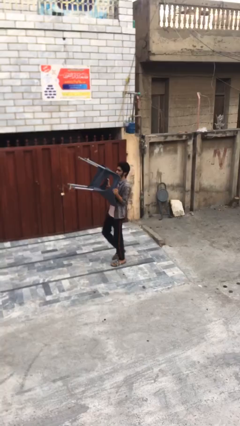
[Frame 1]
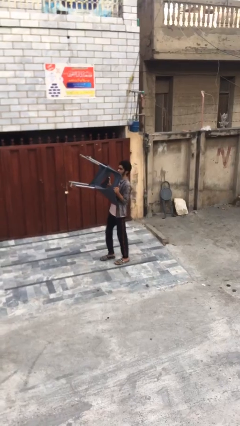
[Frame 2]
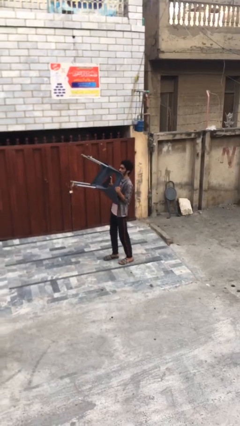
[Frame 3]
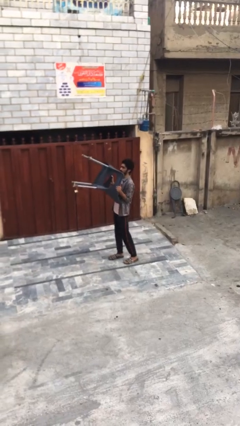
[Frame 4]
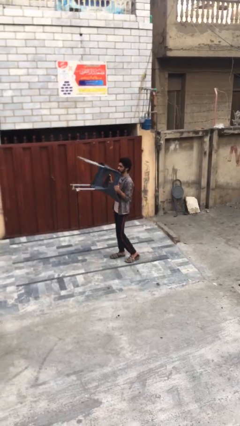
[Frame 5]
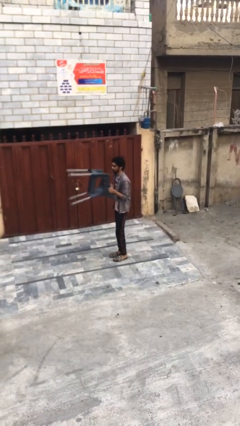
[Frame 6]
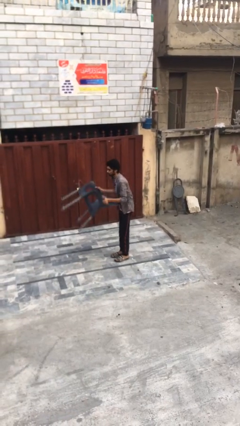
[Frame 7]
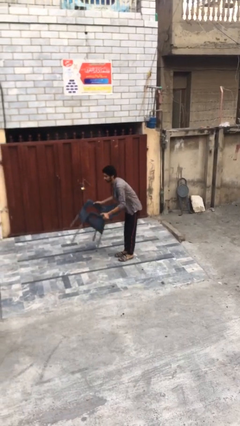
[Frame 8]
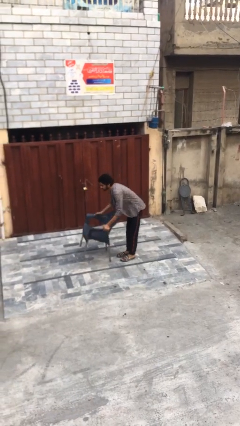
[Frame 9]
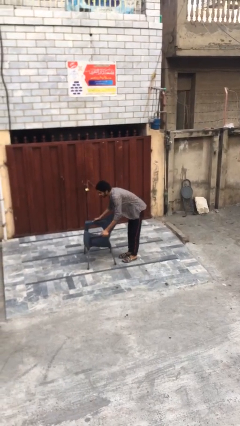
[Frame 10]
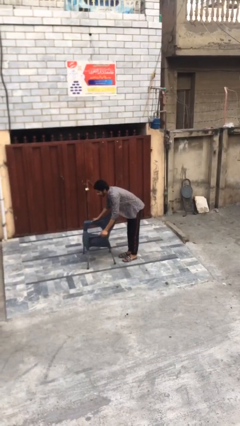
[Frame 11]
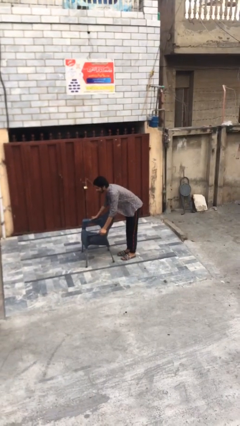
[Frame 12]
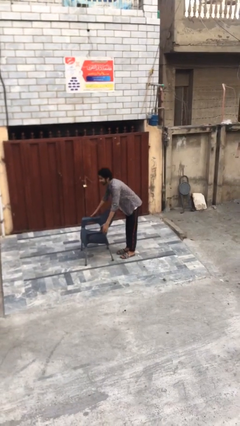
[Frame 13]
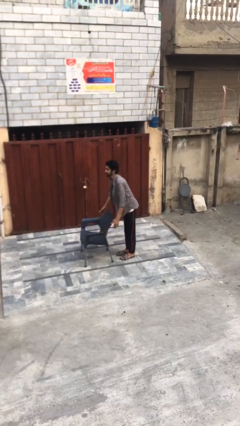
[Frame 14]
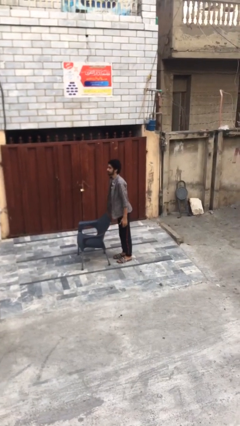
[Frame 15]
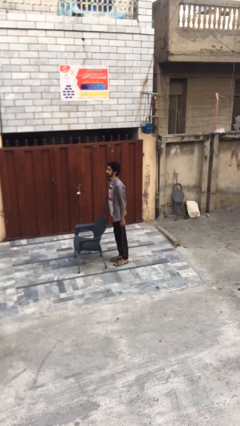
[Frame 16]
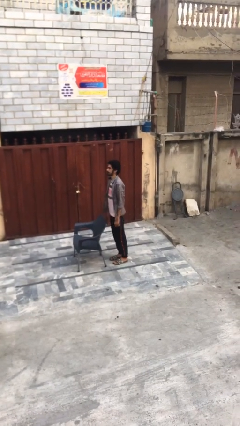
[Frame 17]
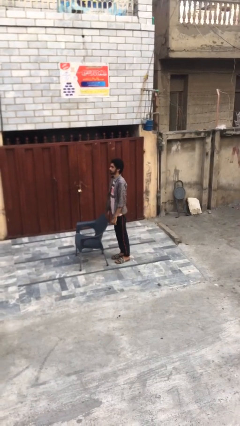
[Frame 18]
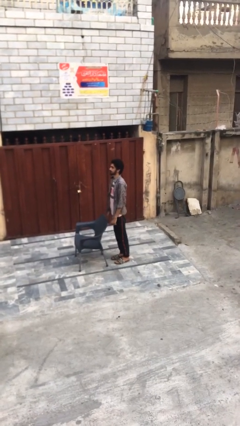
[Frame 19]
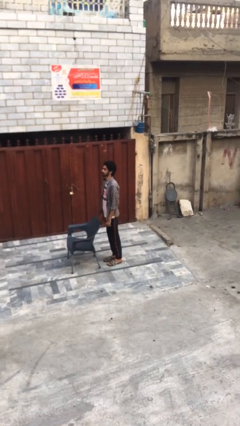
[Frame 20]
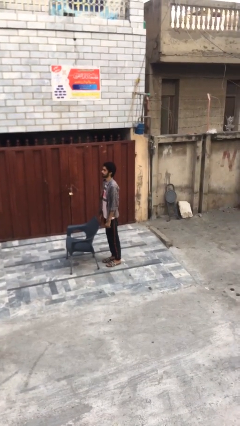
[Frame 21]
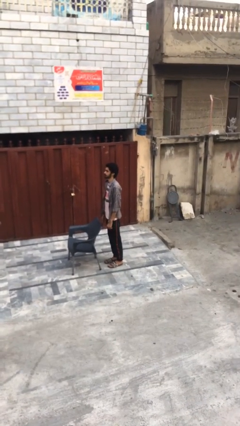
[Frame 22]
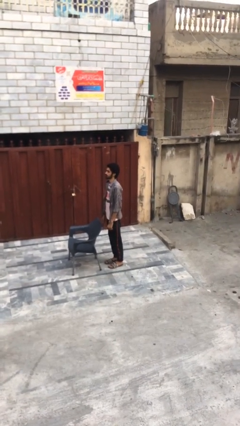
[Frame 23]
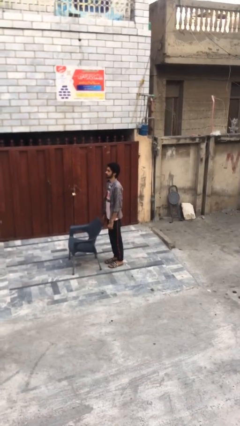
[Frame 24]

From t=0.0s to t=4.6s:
person puts down object on floor

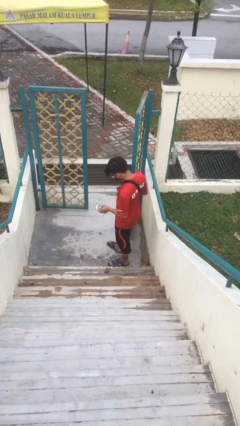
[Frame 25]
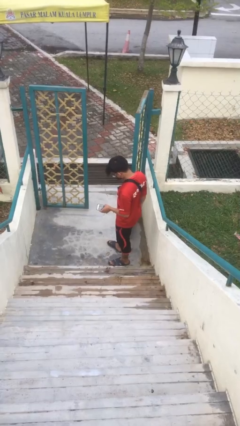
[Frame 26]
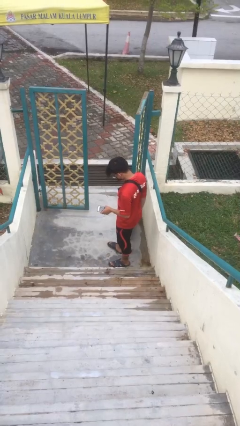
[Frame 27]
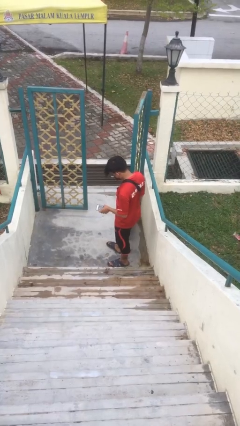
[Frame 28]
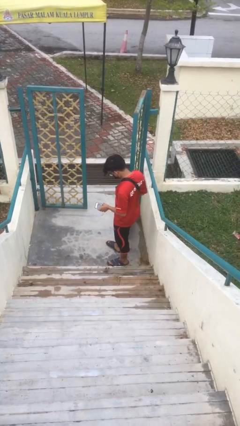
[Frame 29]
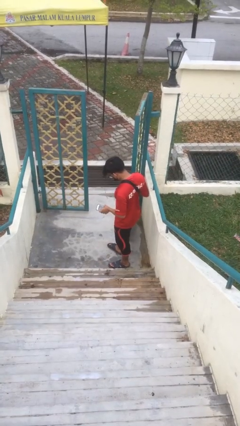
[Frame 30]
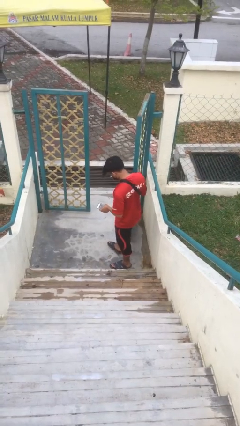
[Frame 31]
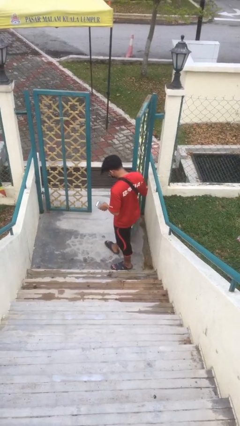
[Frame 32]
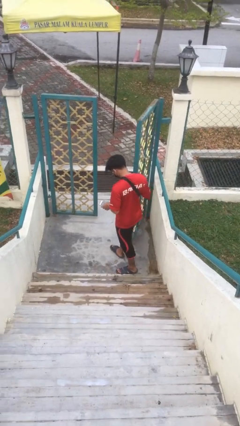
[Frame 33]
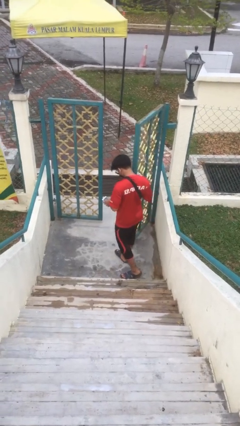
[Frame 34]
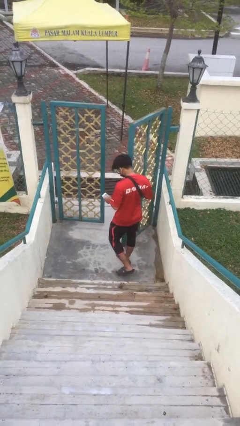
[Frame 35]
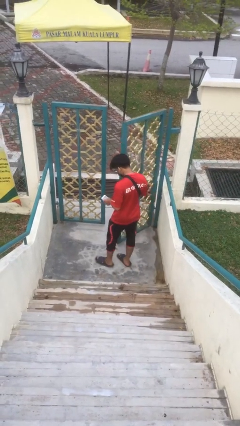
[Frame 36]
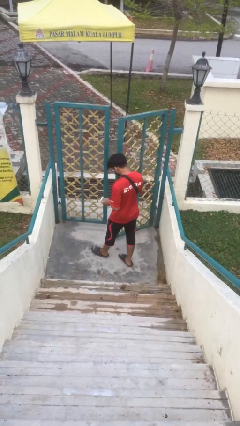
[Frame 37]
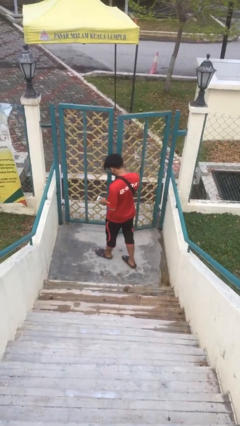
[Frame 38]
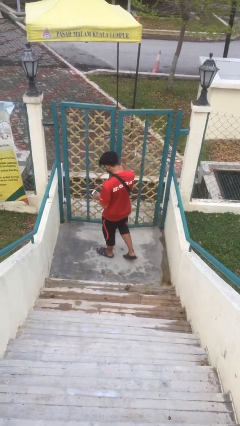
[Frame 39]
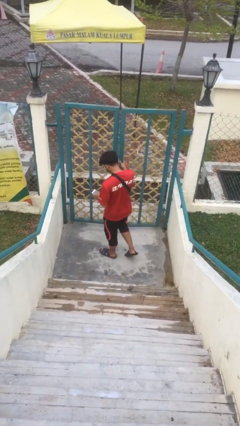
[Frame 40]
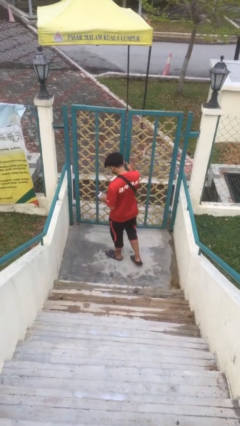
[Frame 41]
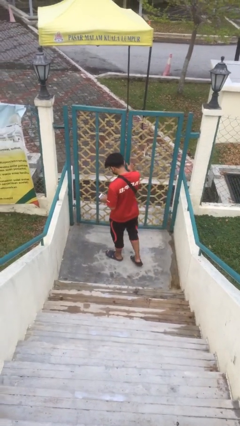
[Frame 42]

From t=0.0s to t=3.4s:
person closes facility door

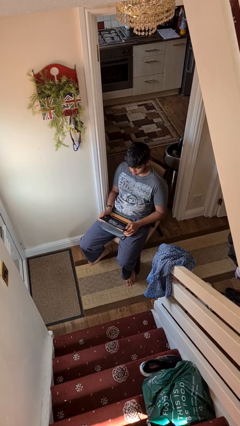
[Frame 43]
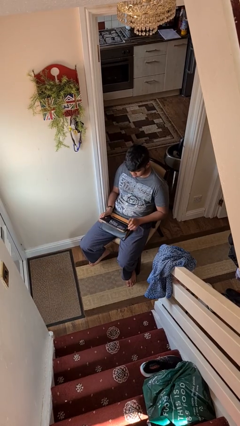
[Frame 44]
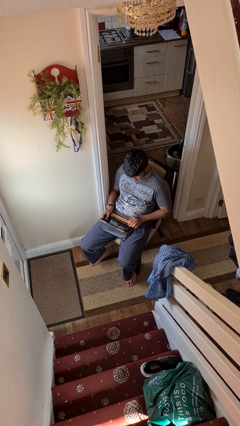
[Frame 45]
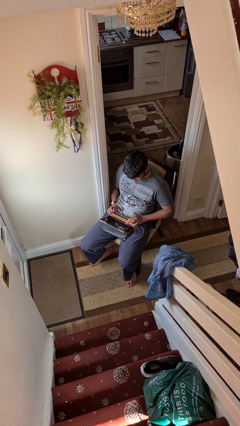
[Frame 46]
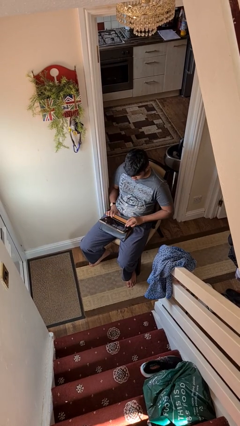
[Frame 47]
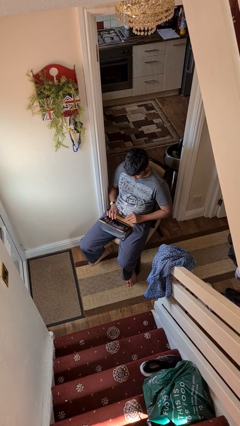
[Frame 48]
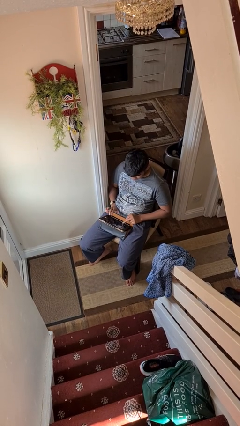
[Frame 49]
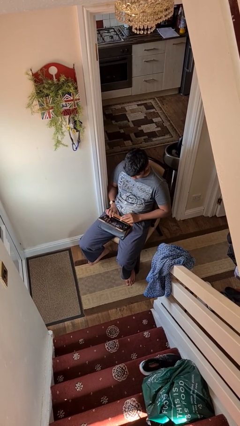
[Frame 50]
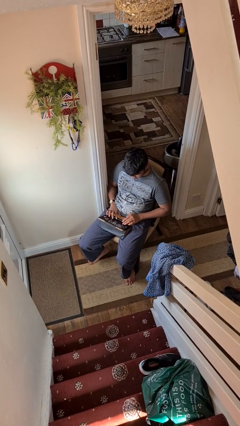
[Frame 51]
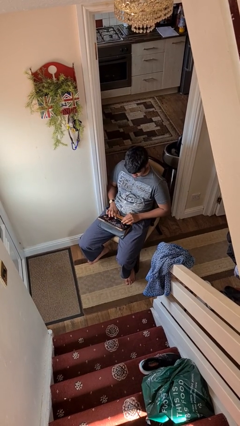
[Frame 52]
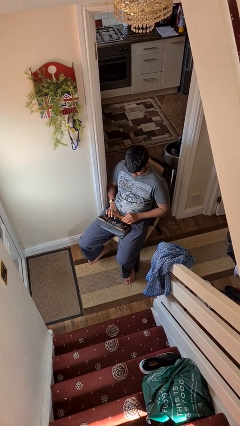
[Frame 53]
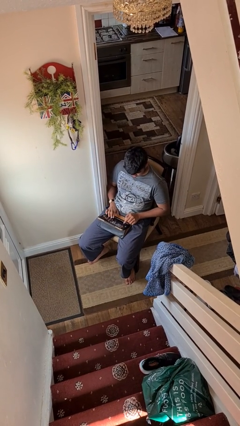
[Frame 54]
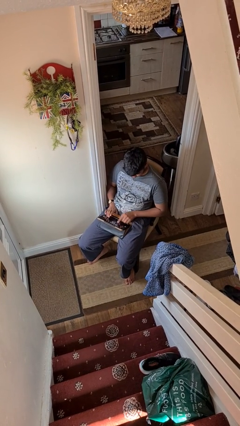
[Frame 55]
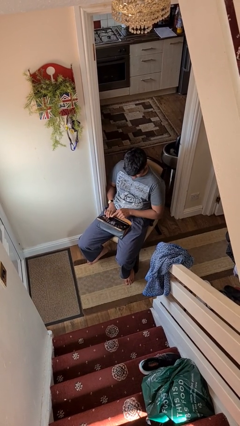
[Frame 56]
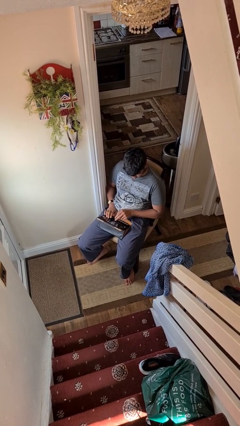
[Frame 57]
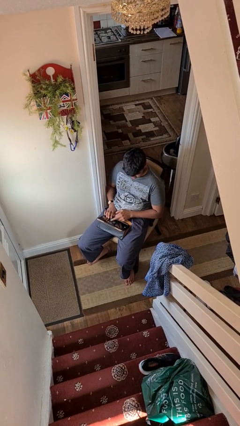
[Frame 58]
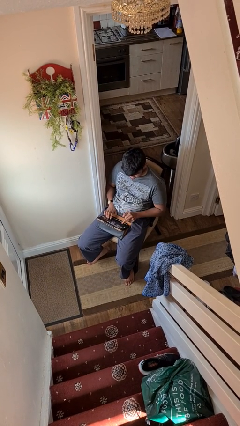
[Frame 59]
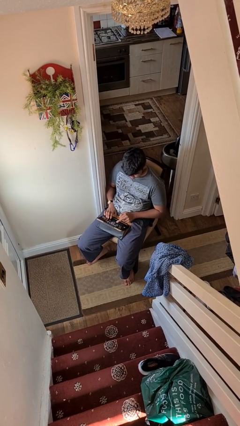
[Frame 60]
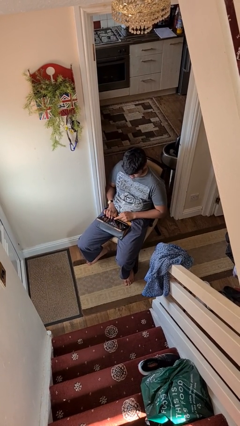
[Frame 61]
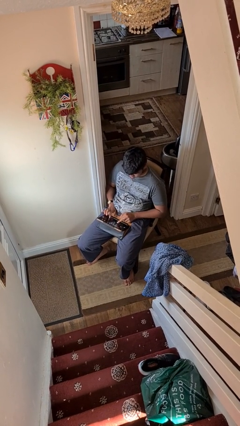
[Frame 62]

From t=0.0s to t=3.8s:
person interacts with tablet

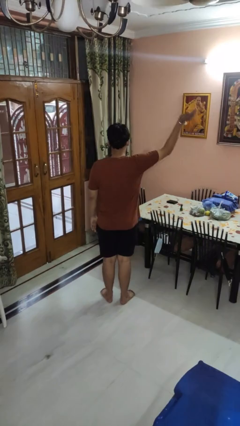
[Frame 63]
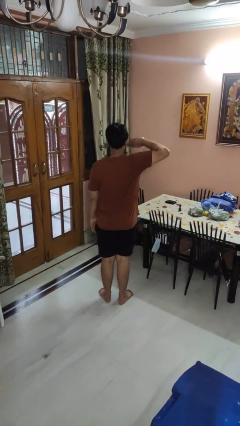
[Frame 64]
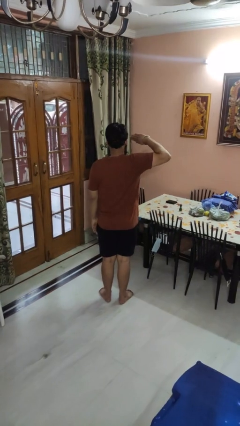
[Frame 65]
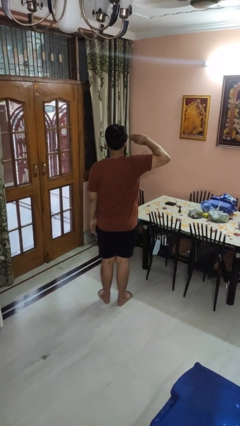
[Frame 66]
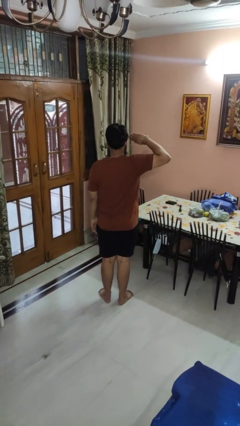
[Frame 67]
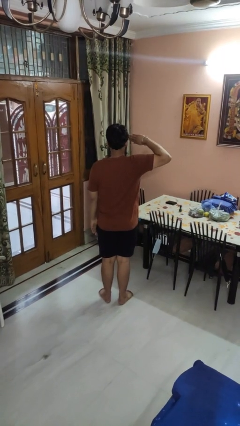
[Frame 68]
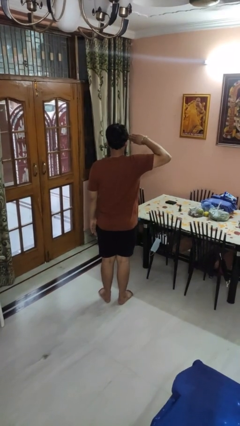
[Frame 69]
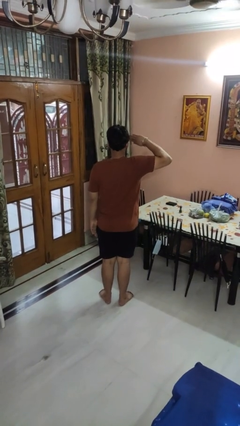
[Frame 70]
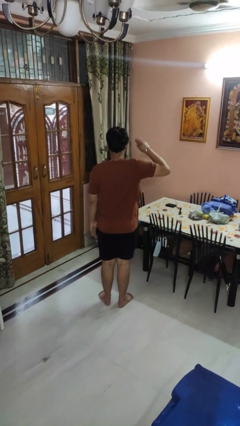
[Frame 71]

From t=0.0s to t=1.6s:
person salutes

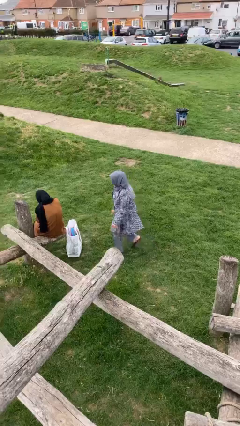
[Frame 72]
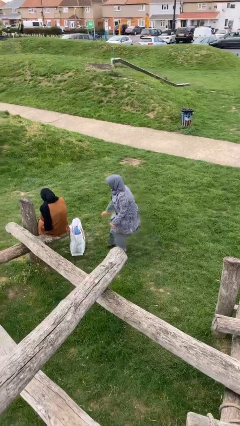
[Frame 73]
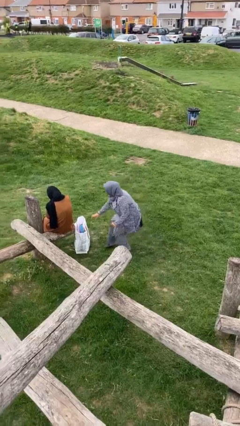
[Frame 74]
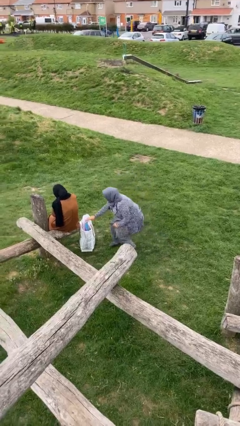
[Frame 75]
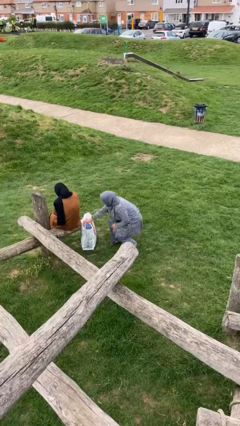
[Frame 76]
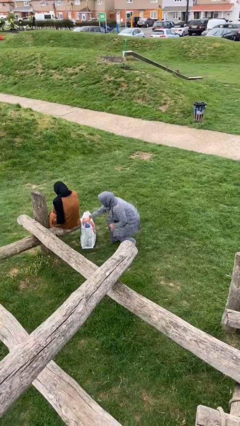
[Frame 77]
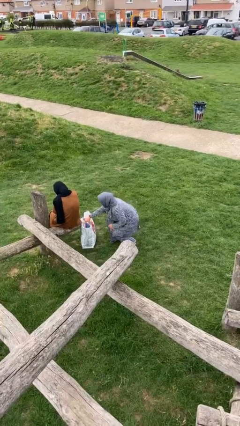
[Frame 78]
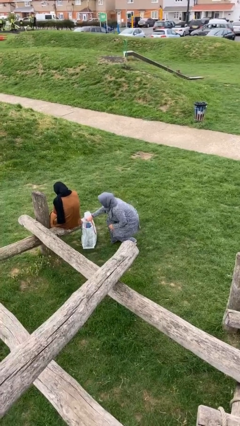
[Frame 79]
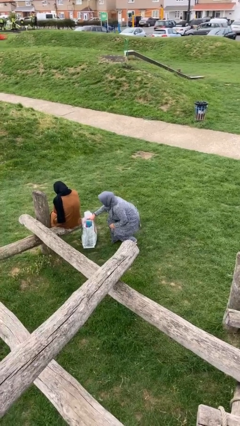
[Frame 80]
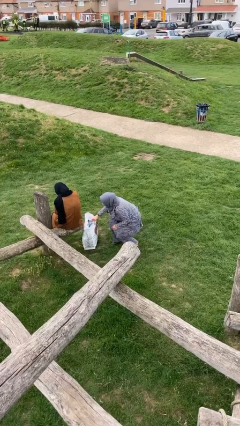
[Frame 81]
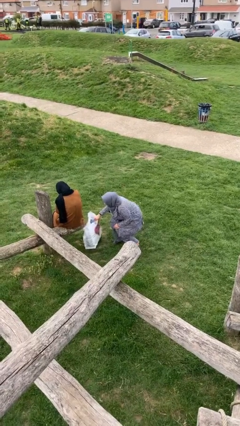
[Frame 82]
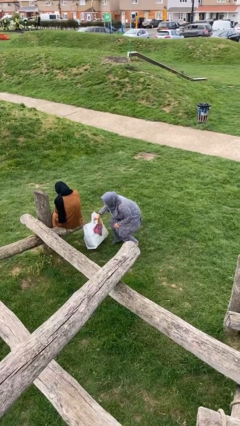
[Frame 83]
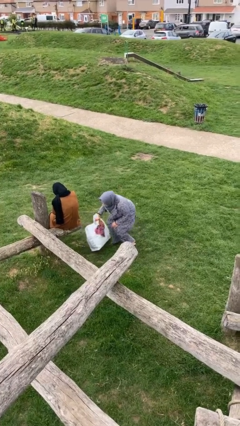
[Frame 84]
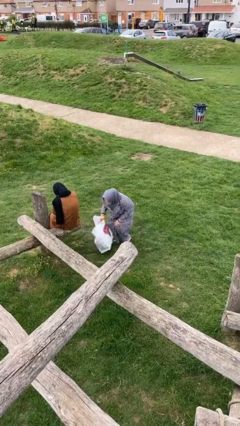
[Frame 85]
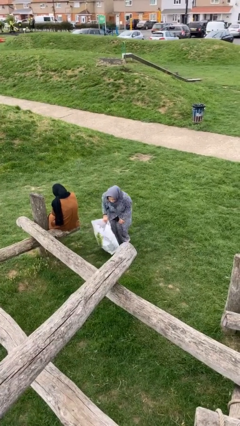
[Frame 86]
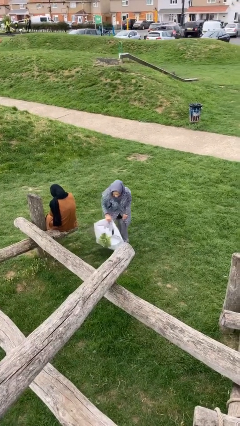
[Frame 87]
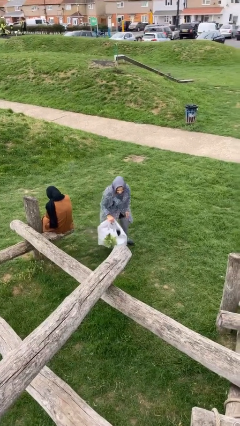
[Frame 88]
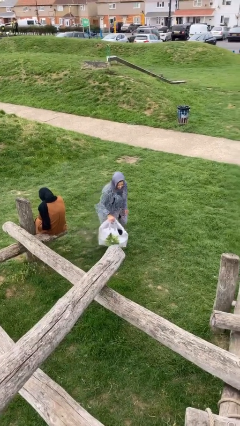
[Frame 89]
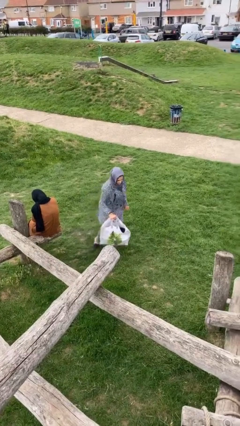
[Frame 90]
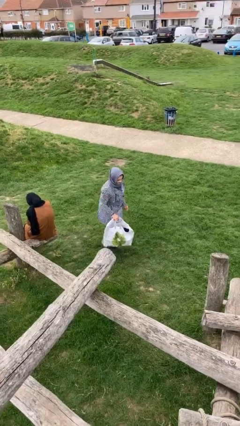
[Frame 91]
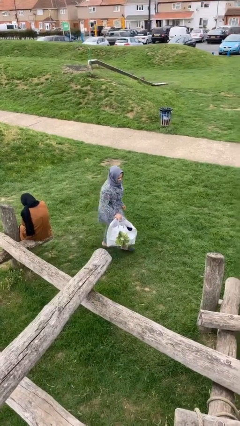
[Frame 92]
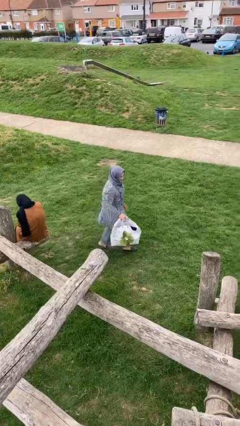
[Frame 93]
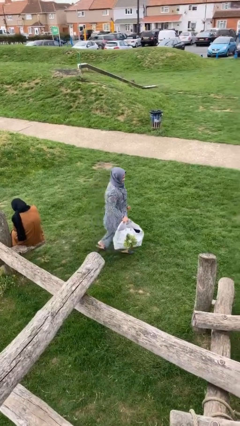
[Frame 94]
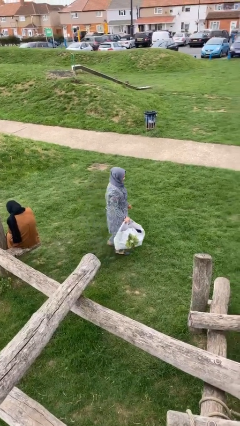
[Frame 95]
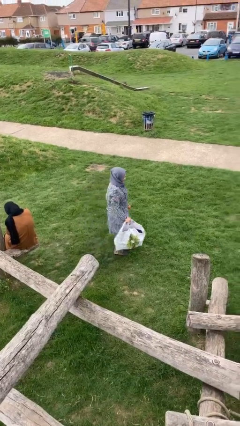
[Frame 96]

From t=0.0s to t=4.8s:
person steals object from person
